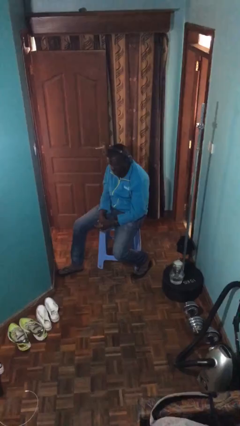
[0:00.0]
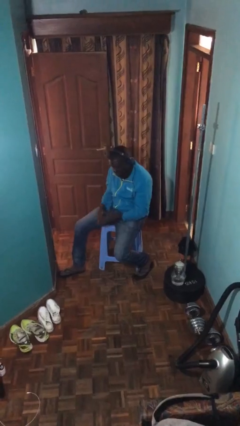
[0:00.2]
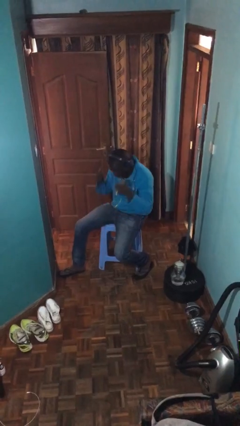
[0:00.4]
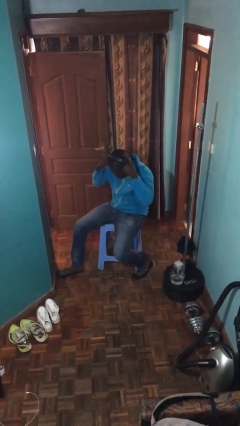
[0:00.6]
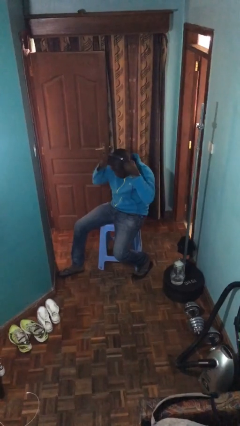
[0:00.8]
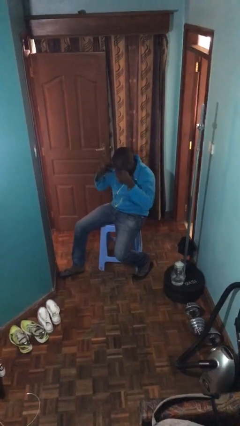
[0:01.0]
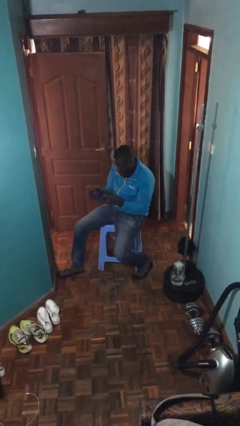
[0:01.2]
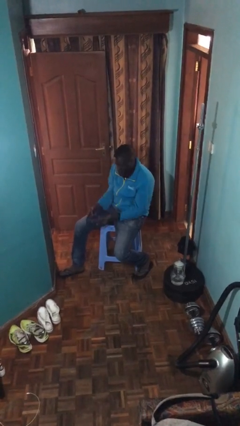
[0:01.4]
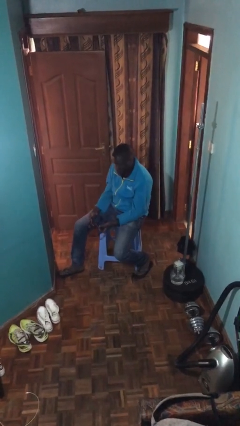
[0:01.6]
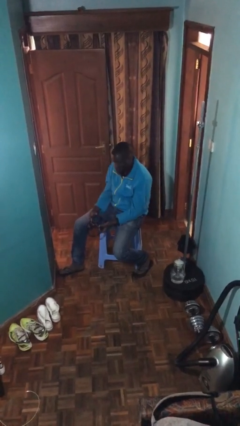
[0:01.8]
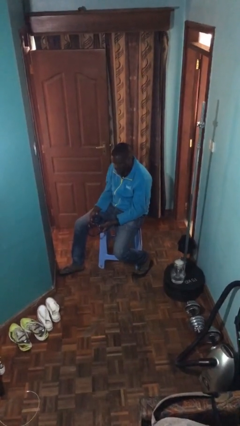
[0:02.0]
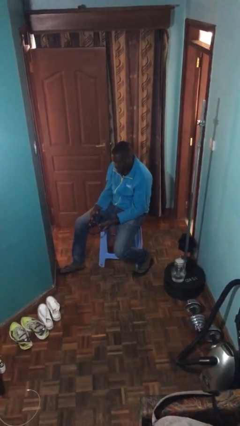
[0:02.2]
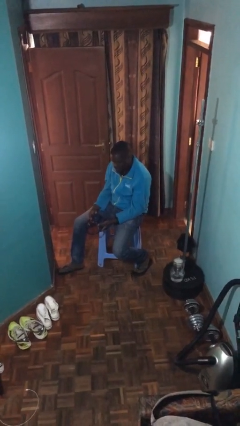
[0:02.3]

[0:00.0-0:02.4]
person takes off headphones

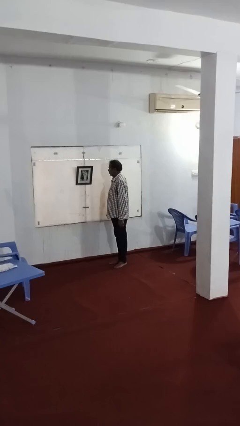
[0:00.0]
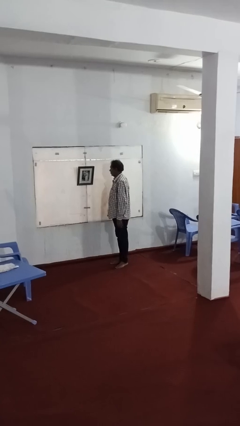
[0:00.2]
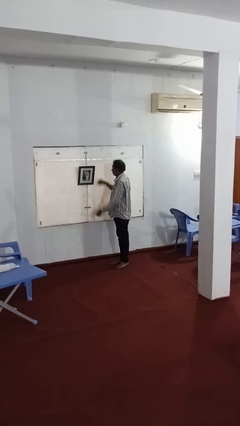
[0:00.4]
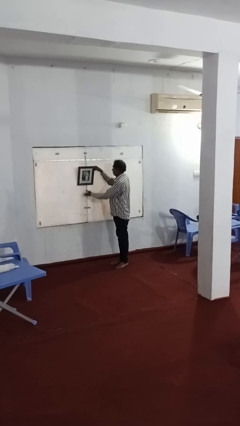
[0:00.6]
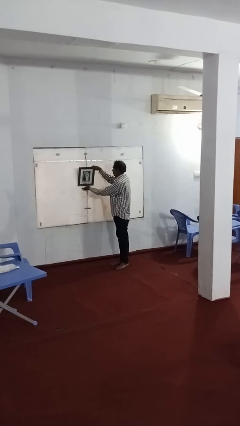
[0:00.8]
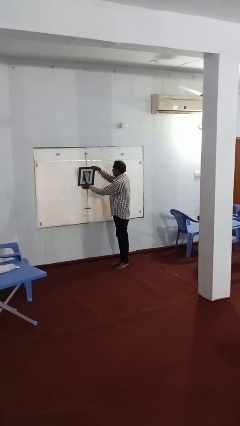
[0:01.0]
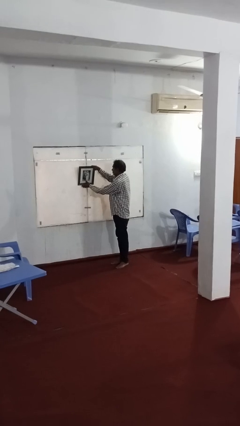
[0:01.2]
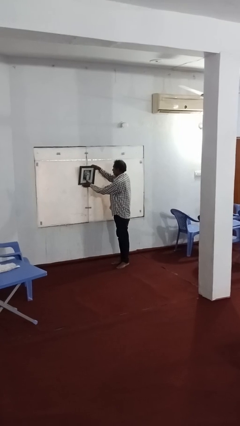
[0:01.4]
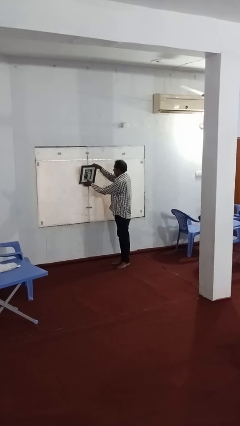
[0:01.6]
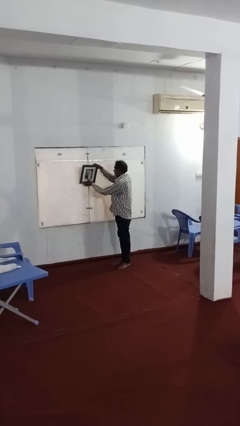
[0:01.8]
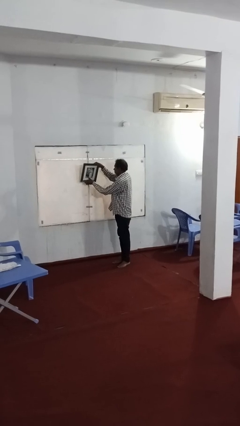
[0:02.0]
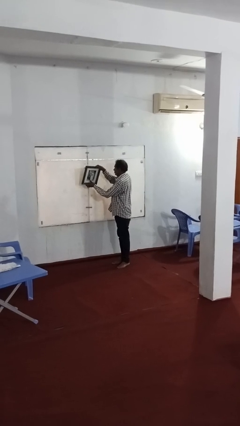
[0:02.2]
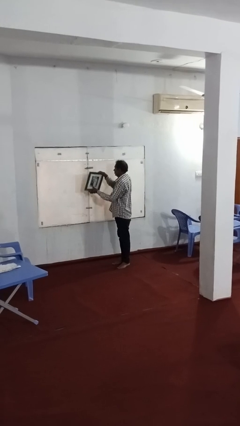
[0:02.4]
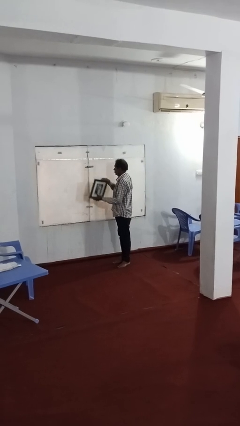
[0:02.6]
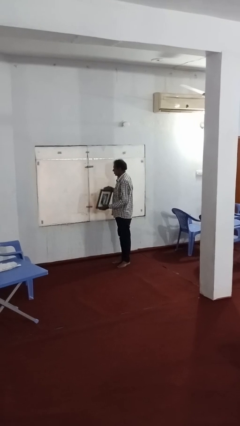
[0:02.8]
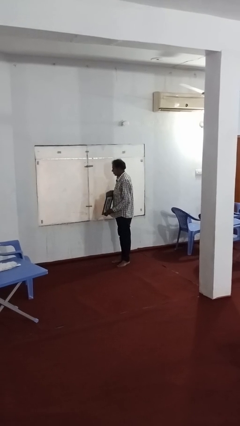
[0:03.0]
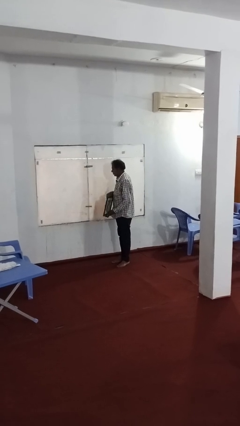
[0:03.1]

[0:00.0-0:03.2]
person takes down picture frame

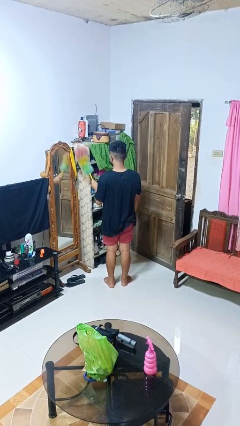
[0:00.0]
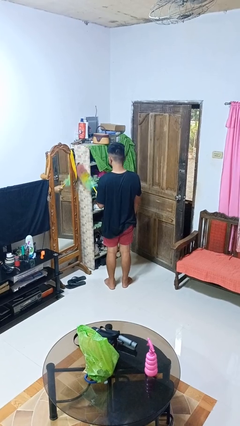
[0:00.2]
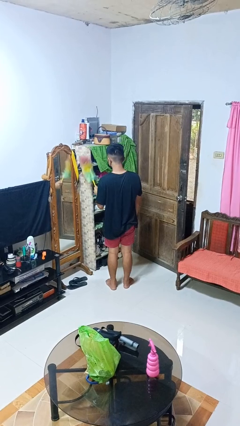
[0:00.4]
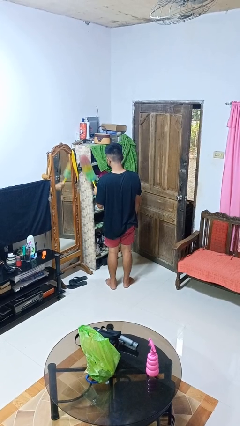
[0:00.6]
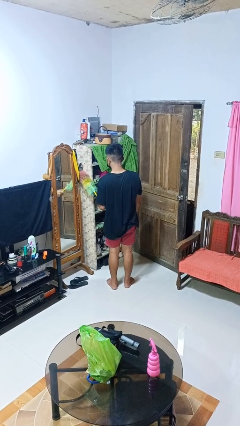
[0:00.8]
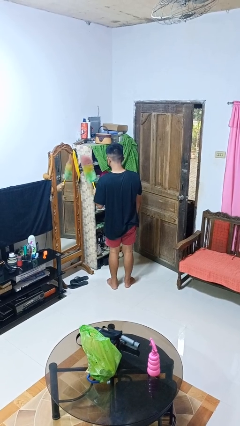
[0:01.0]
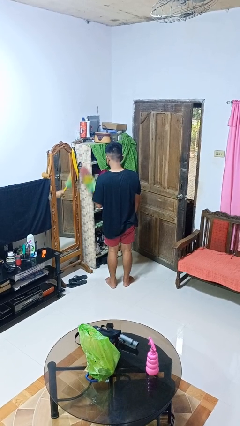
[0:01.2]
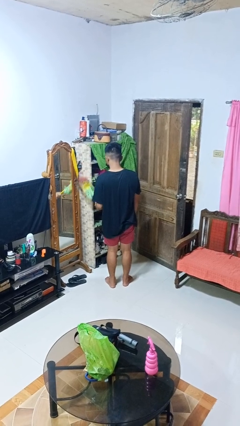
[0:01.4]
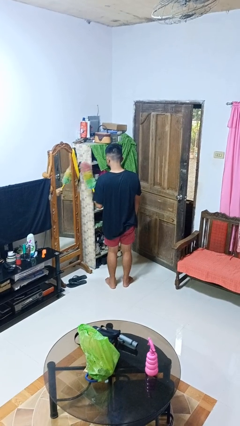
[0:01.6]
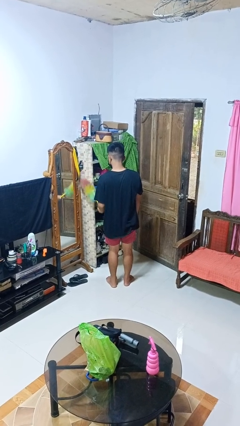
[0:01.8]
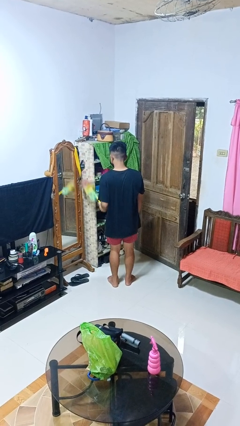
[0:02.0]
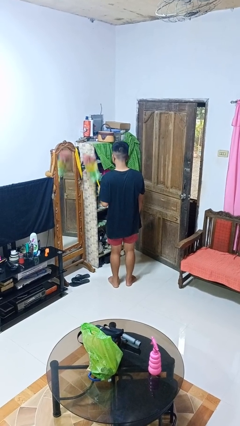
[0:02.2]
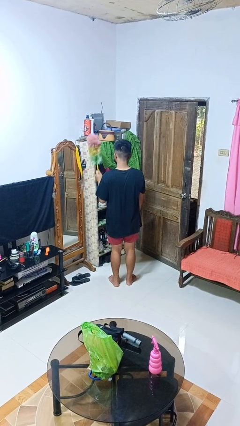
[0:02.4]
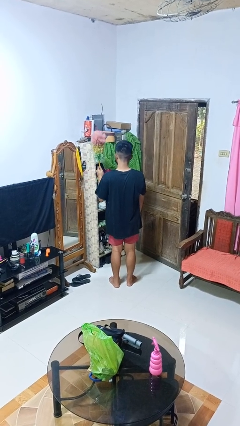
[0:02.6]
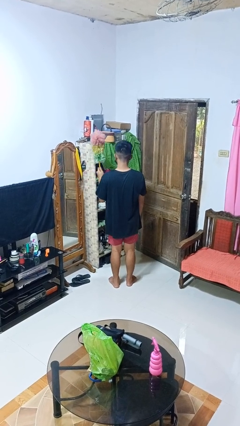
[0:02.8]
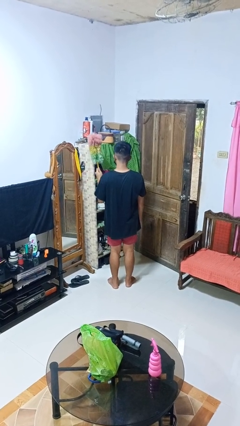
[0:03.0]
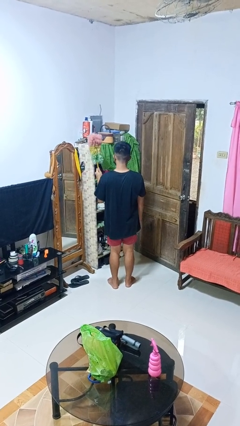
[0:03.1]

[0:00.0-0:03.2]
person dusts furniture

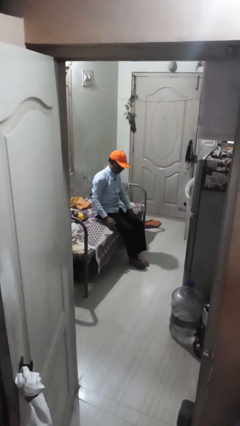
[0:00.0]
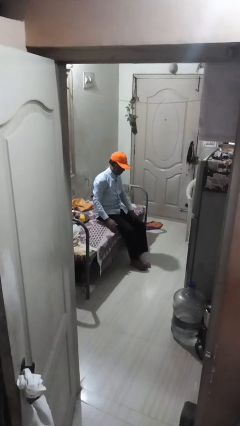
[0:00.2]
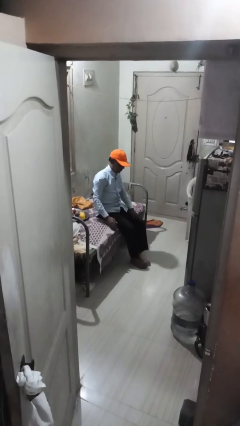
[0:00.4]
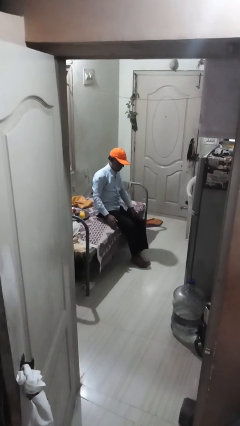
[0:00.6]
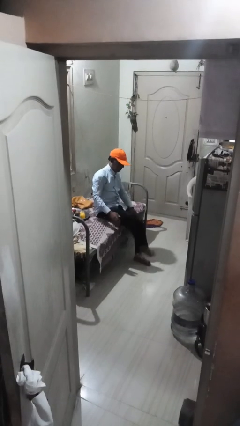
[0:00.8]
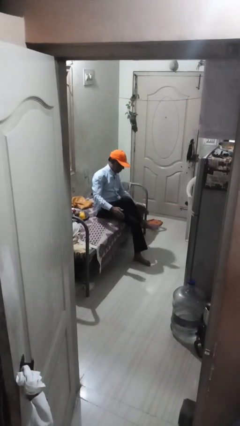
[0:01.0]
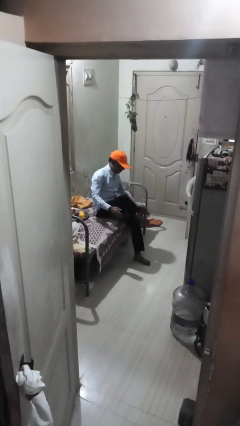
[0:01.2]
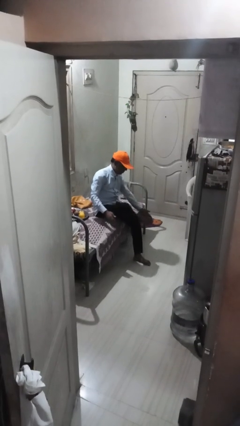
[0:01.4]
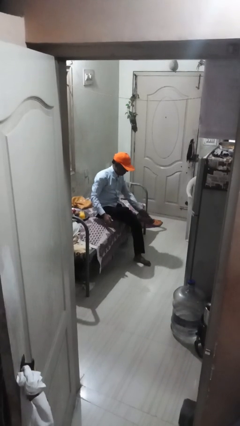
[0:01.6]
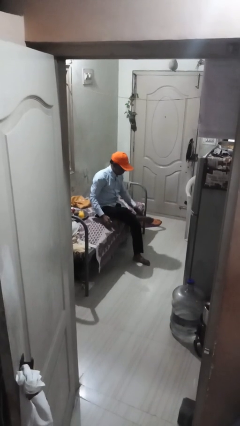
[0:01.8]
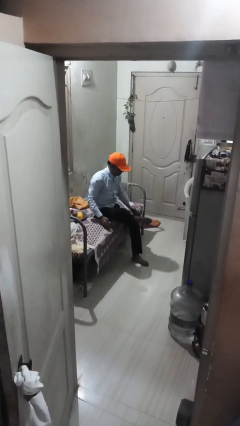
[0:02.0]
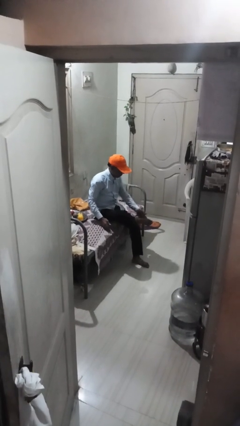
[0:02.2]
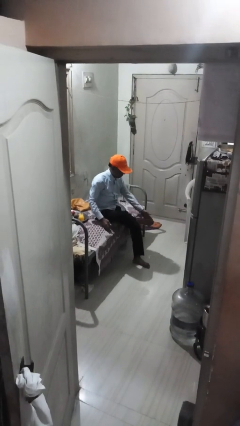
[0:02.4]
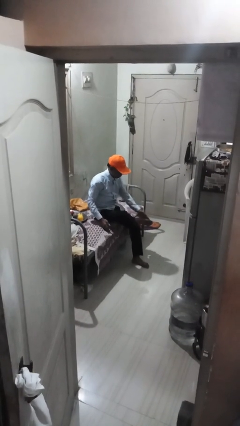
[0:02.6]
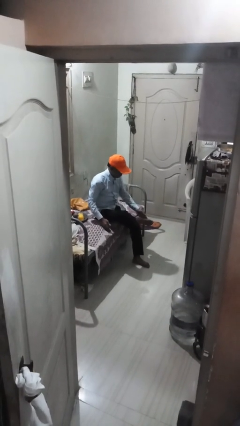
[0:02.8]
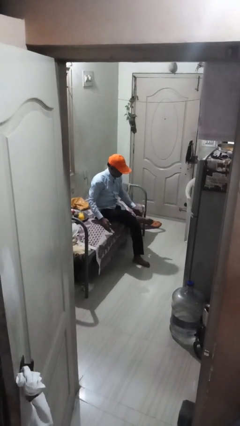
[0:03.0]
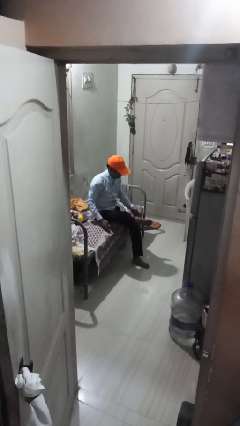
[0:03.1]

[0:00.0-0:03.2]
person rubs foot

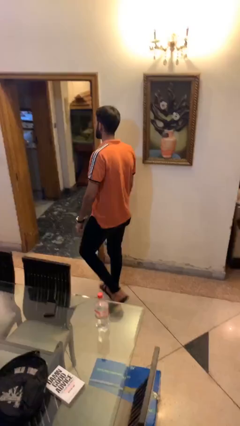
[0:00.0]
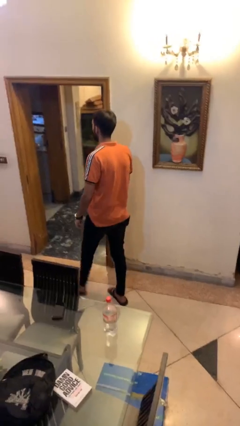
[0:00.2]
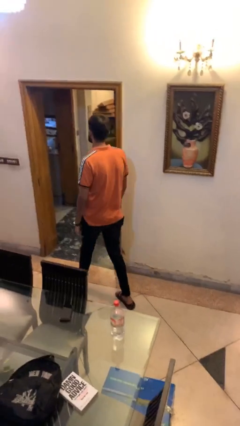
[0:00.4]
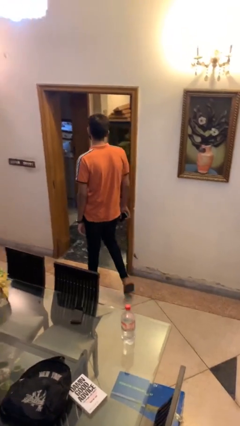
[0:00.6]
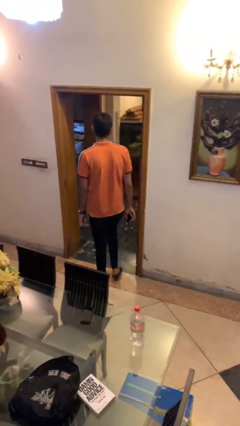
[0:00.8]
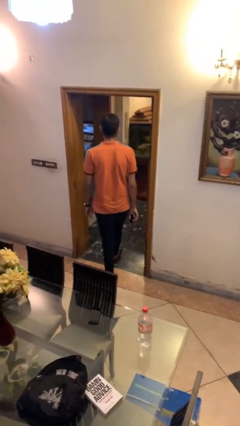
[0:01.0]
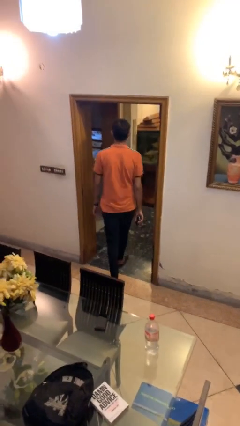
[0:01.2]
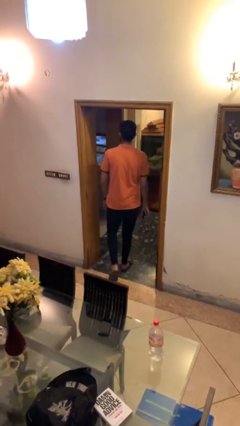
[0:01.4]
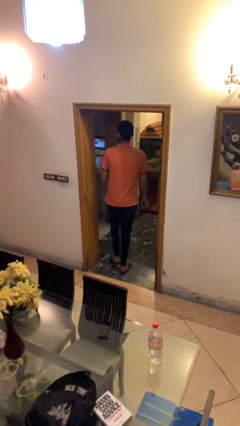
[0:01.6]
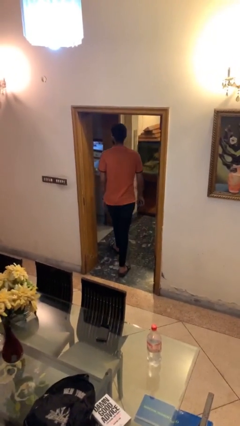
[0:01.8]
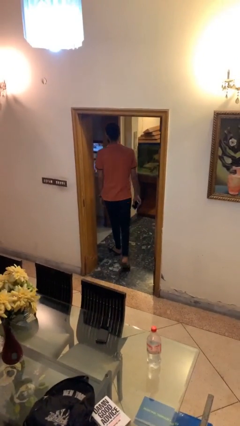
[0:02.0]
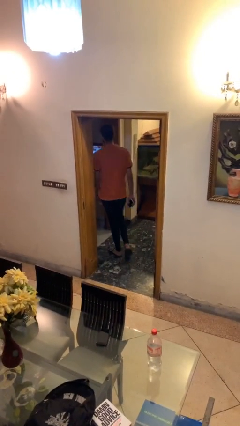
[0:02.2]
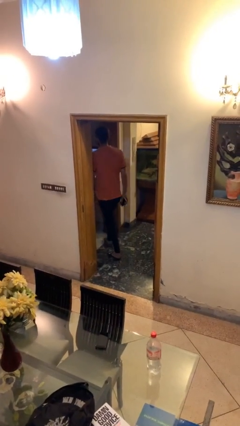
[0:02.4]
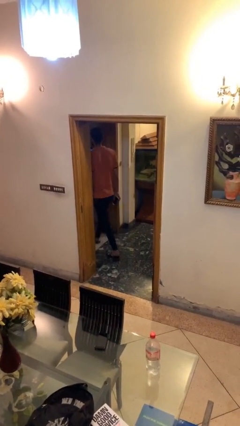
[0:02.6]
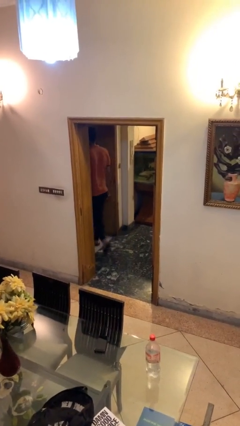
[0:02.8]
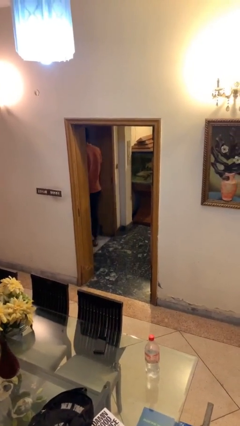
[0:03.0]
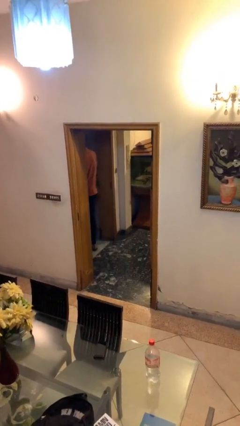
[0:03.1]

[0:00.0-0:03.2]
person exits scene through structure

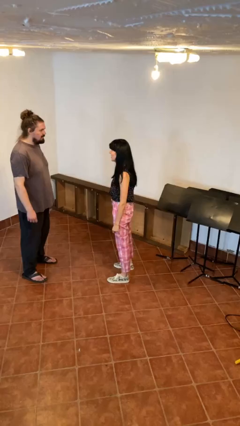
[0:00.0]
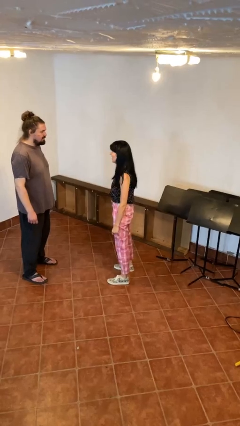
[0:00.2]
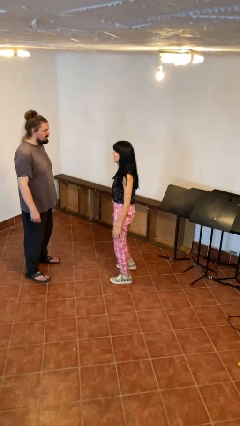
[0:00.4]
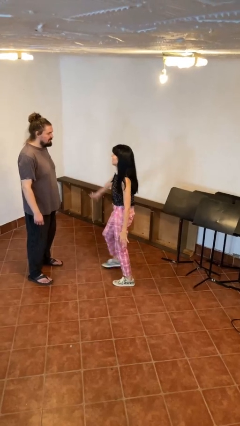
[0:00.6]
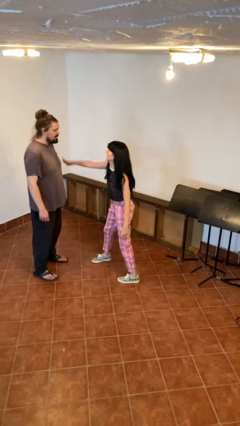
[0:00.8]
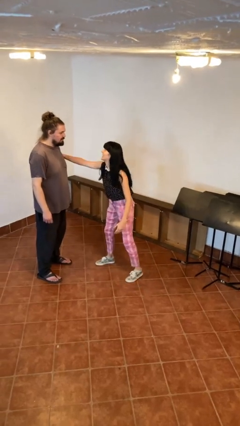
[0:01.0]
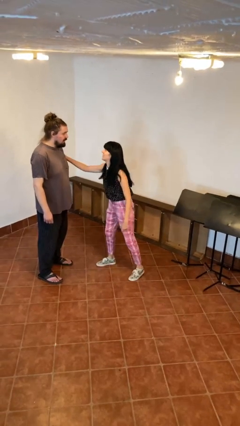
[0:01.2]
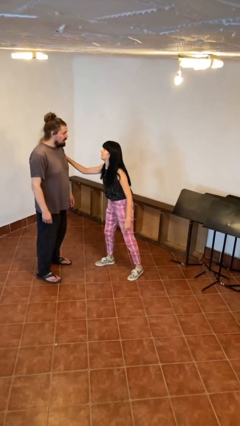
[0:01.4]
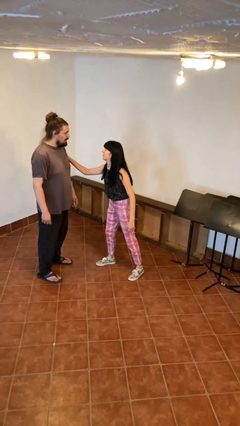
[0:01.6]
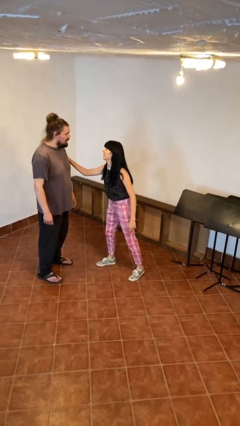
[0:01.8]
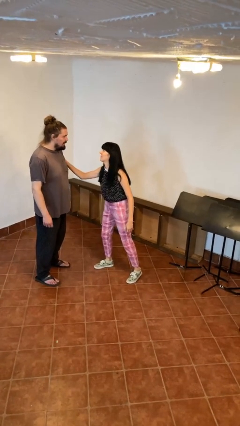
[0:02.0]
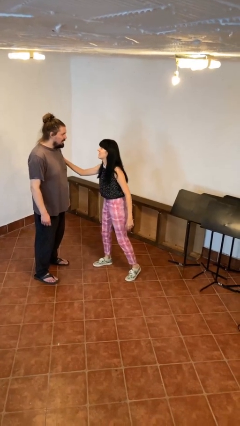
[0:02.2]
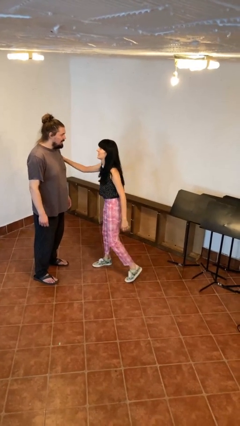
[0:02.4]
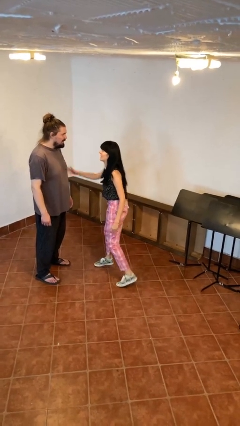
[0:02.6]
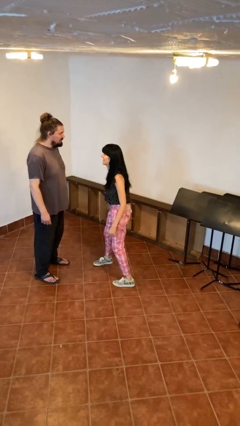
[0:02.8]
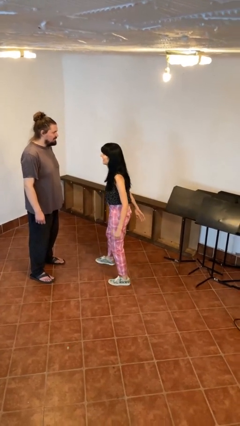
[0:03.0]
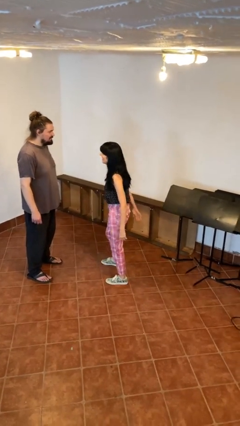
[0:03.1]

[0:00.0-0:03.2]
person grabs person by bicep
